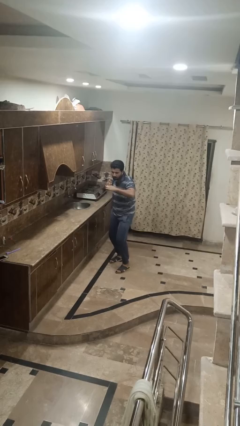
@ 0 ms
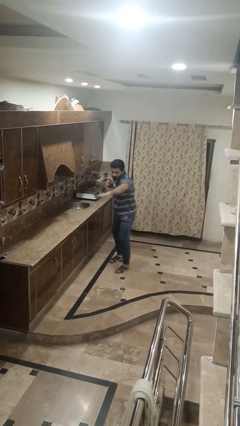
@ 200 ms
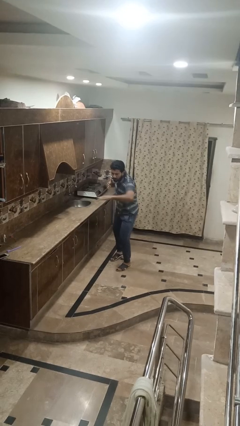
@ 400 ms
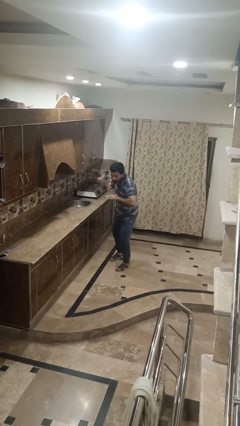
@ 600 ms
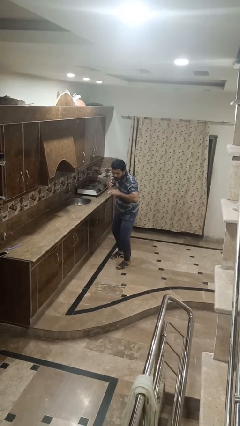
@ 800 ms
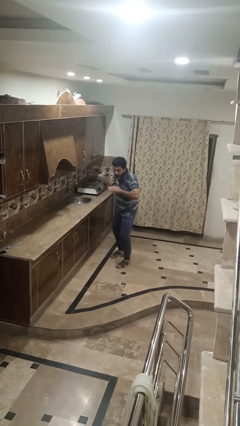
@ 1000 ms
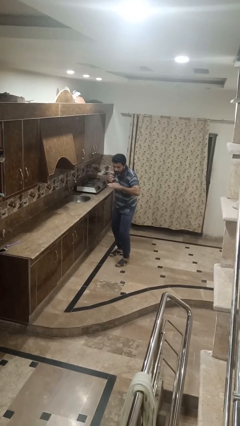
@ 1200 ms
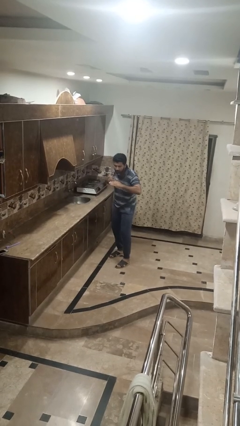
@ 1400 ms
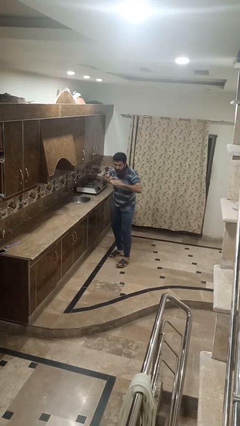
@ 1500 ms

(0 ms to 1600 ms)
person karate chop

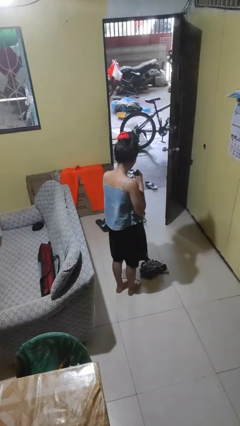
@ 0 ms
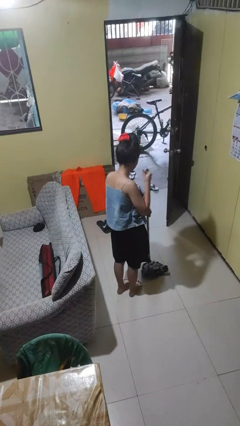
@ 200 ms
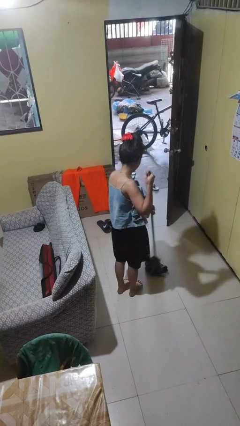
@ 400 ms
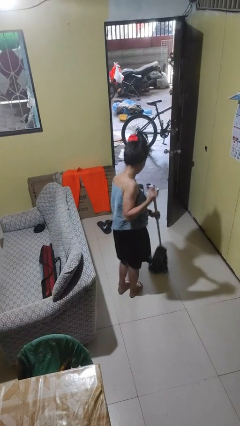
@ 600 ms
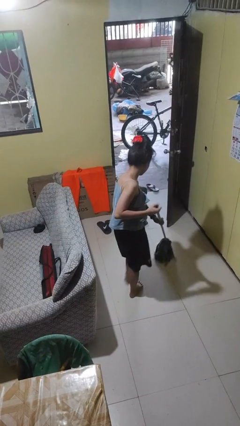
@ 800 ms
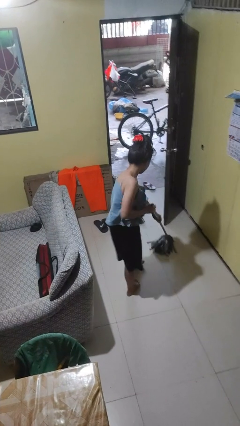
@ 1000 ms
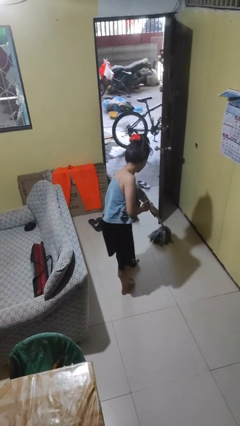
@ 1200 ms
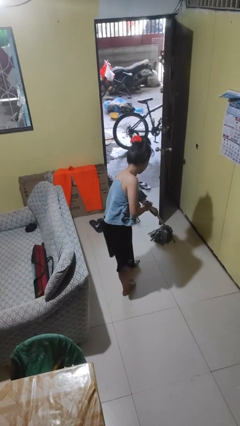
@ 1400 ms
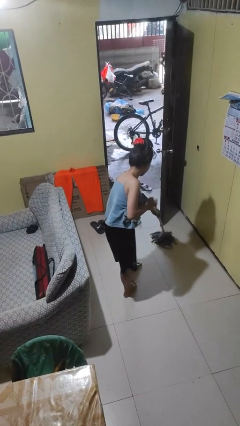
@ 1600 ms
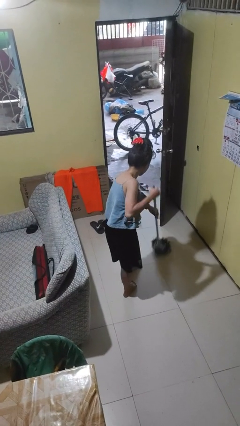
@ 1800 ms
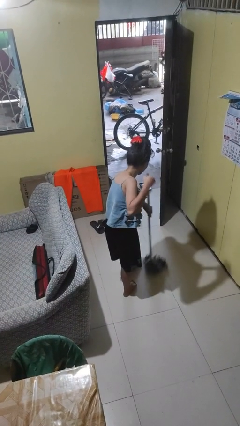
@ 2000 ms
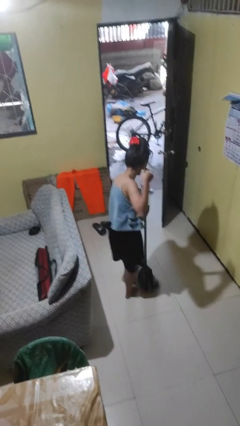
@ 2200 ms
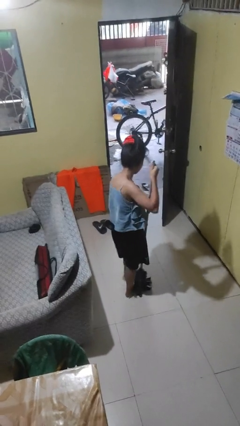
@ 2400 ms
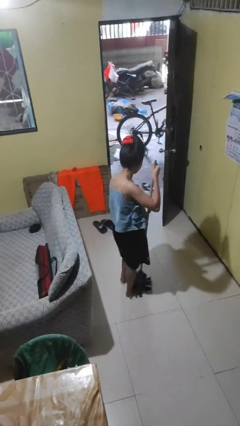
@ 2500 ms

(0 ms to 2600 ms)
person mops

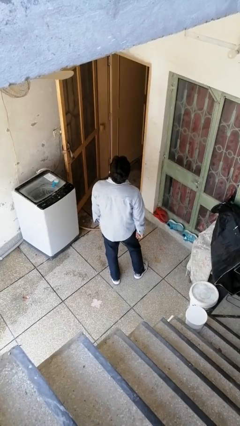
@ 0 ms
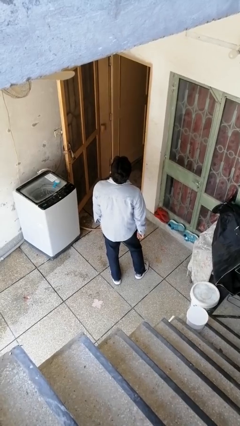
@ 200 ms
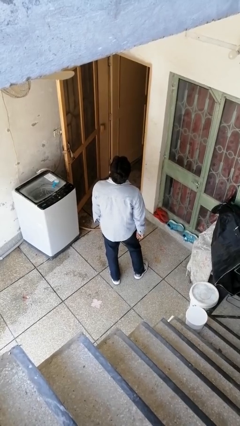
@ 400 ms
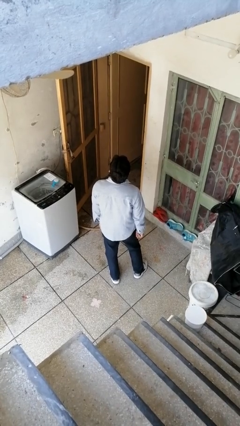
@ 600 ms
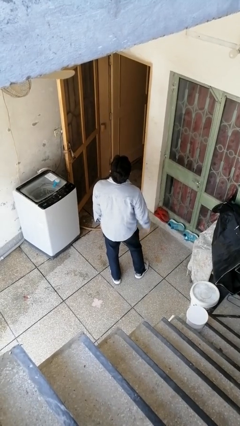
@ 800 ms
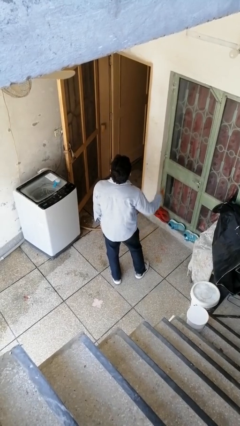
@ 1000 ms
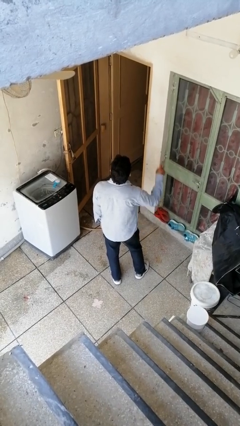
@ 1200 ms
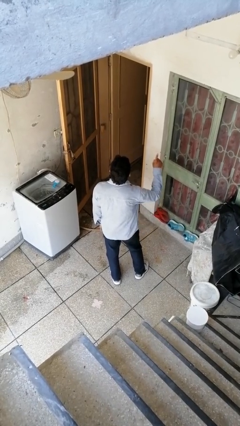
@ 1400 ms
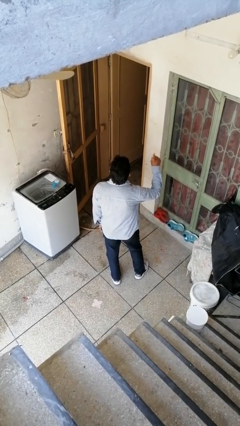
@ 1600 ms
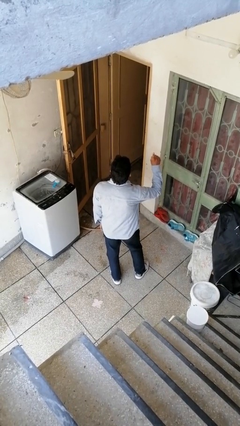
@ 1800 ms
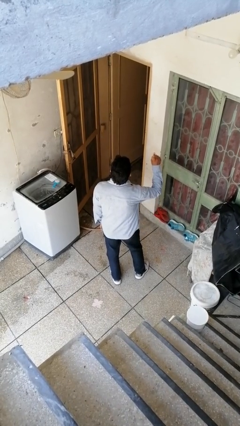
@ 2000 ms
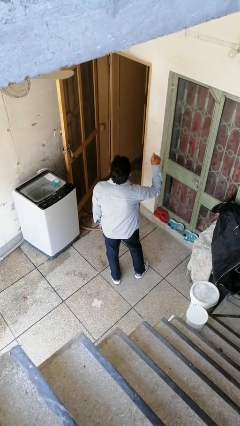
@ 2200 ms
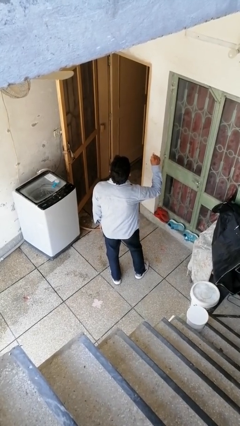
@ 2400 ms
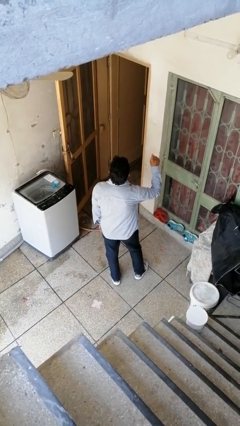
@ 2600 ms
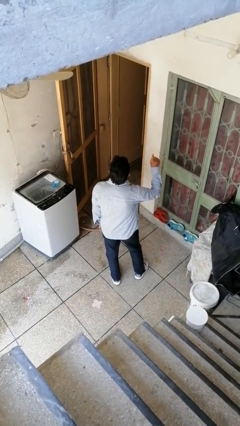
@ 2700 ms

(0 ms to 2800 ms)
person gestures number one

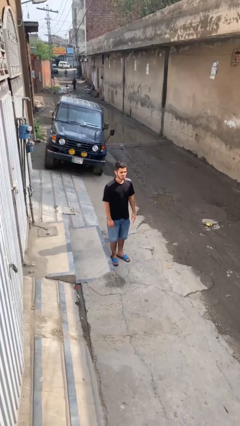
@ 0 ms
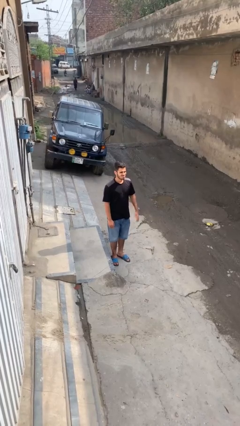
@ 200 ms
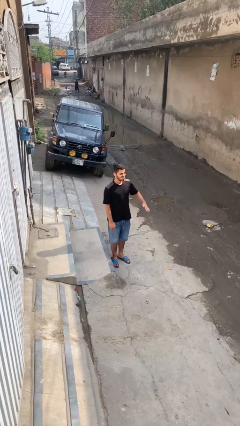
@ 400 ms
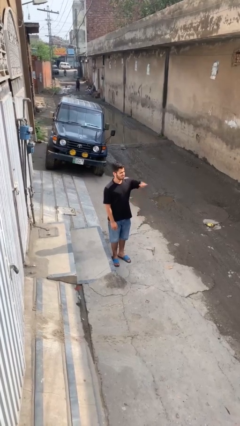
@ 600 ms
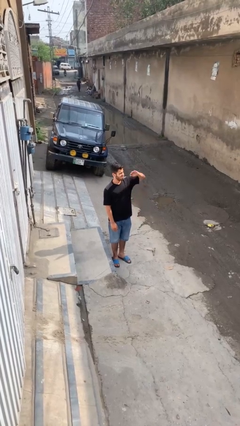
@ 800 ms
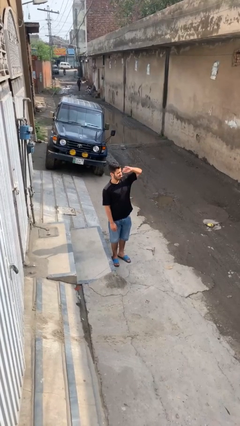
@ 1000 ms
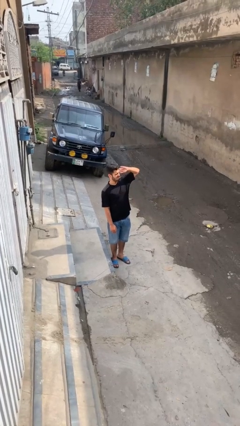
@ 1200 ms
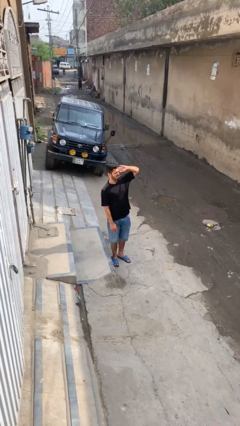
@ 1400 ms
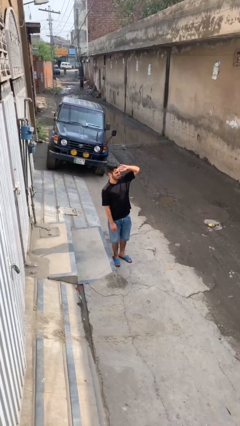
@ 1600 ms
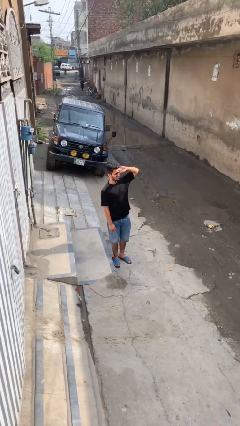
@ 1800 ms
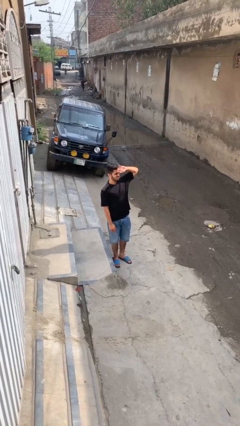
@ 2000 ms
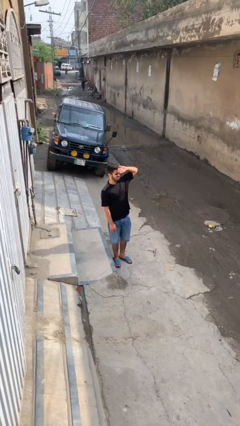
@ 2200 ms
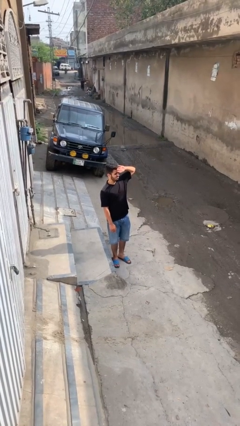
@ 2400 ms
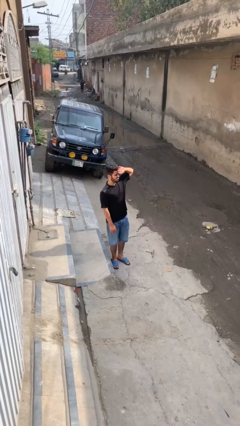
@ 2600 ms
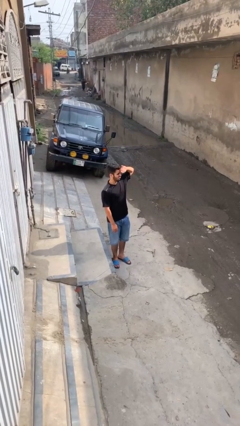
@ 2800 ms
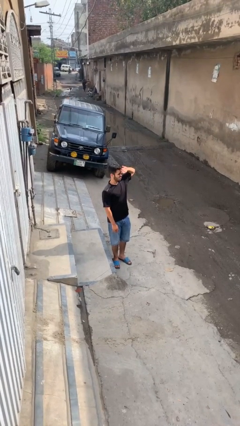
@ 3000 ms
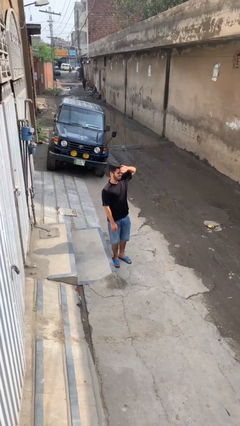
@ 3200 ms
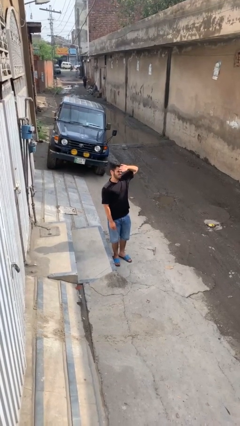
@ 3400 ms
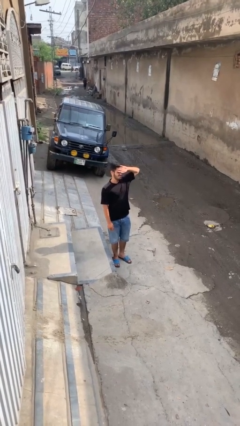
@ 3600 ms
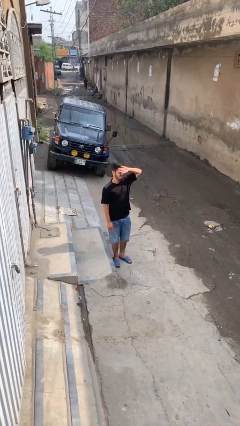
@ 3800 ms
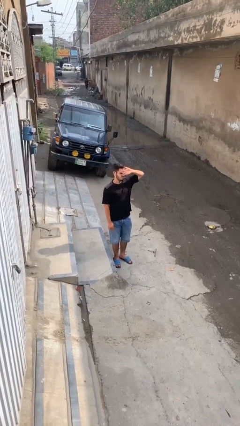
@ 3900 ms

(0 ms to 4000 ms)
person shades eyes

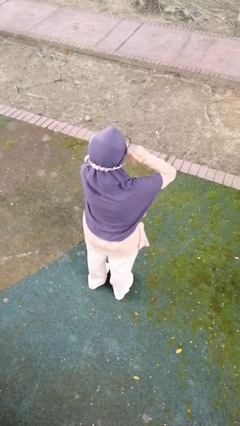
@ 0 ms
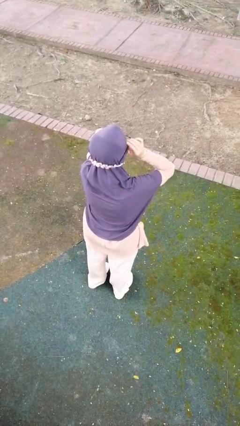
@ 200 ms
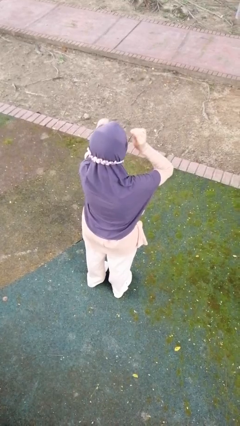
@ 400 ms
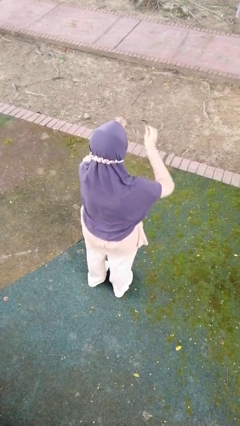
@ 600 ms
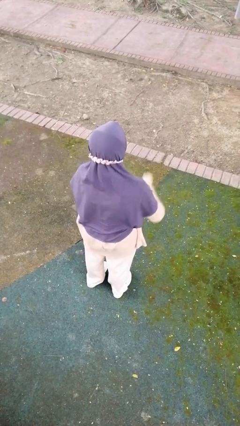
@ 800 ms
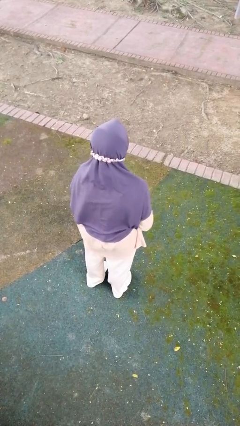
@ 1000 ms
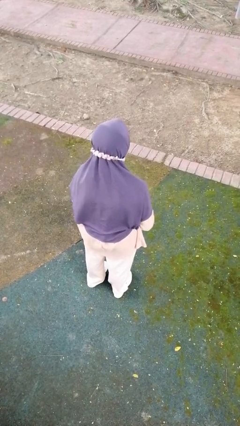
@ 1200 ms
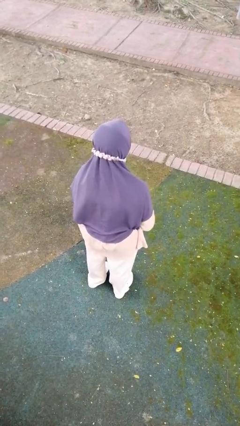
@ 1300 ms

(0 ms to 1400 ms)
person takes off glasses

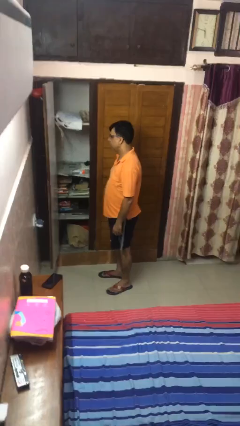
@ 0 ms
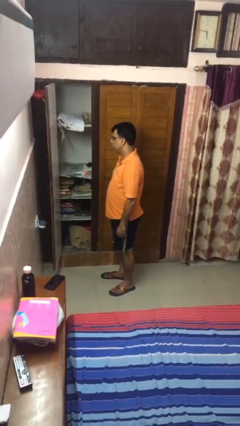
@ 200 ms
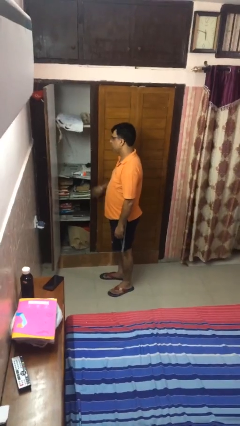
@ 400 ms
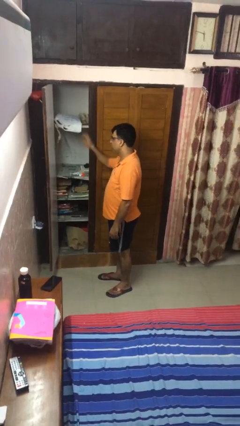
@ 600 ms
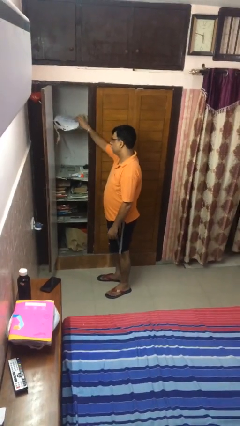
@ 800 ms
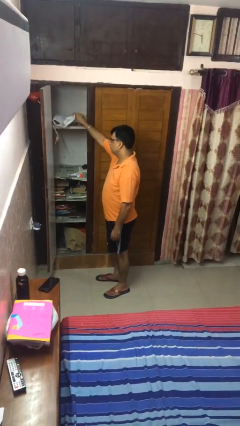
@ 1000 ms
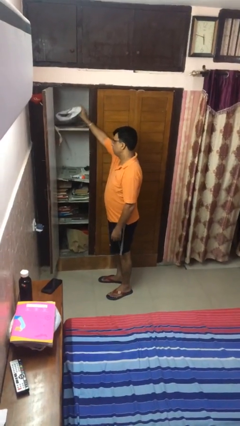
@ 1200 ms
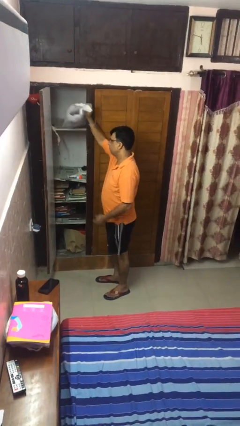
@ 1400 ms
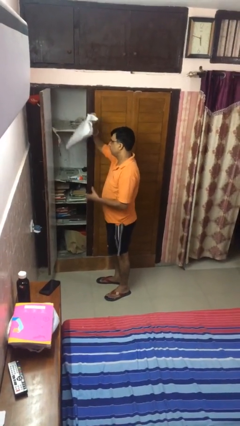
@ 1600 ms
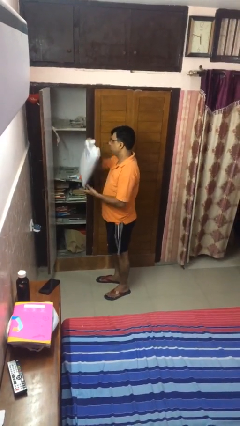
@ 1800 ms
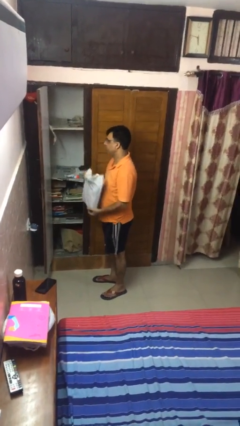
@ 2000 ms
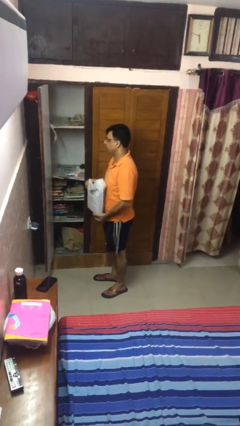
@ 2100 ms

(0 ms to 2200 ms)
person picks up object from shelf

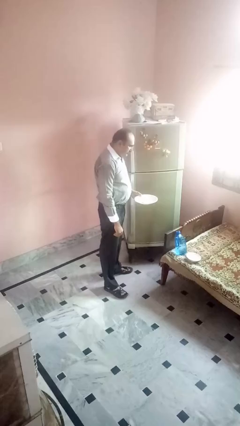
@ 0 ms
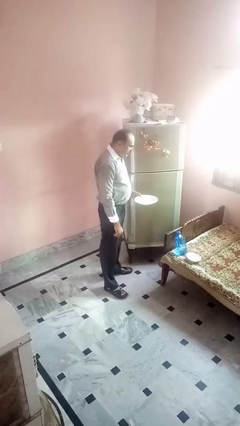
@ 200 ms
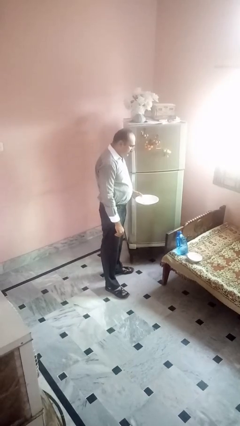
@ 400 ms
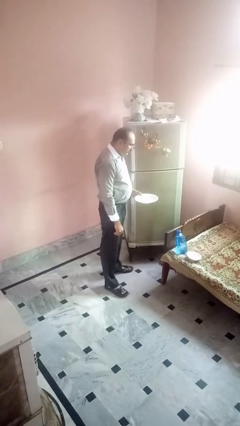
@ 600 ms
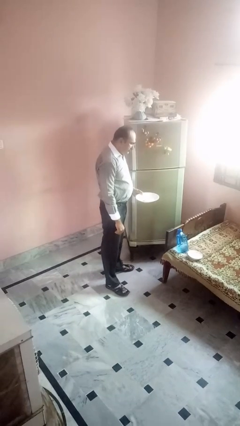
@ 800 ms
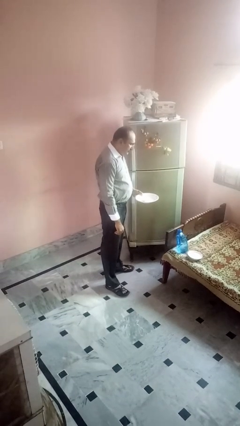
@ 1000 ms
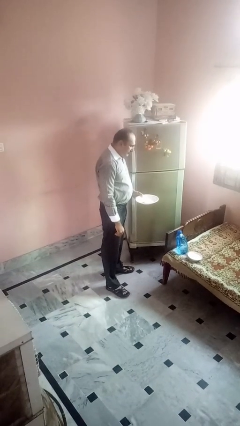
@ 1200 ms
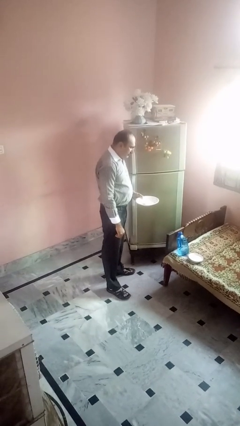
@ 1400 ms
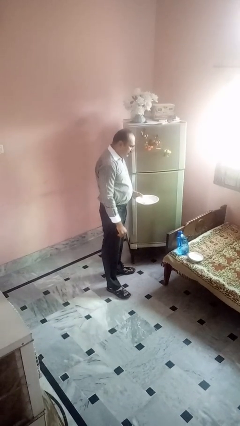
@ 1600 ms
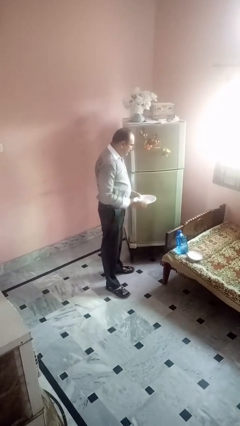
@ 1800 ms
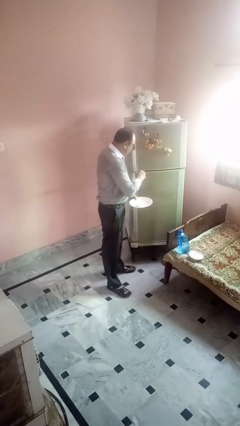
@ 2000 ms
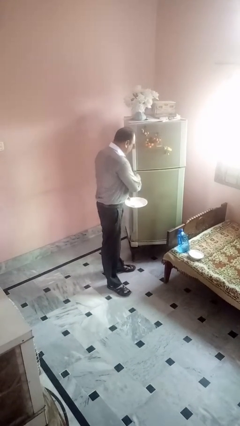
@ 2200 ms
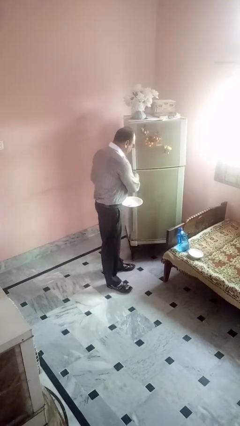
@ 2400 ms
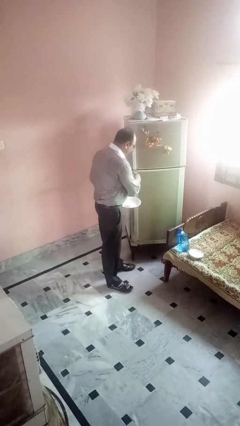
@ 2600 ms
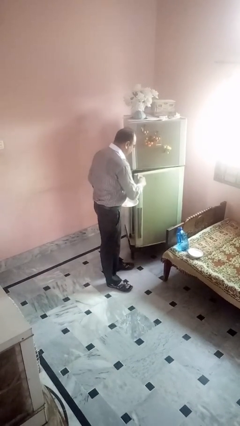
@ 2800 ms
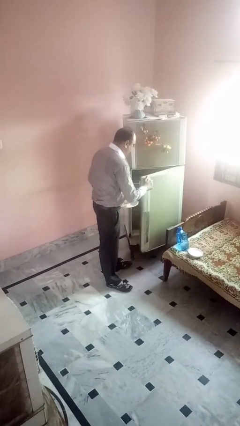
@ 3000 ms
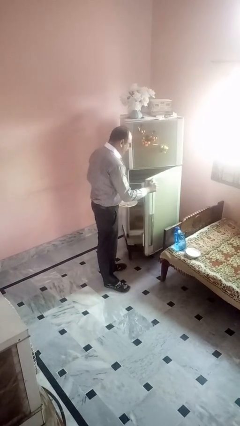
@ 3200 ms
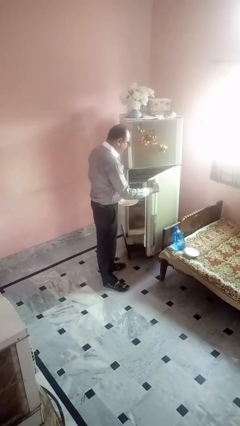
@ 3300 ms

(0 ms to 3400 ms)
person opens refrigerator
